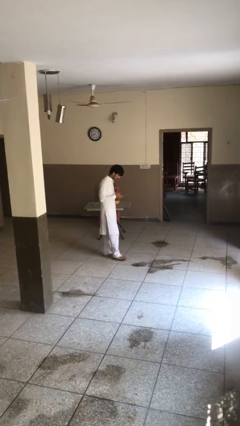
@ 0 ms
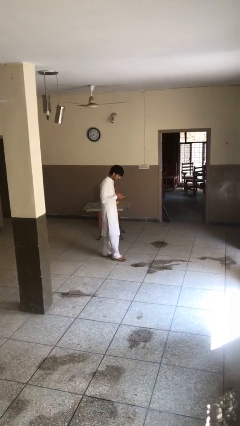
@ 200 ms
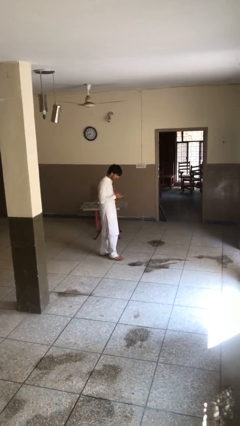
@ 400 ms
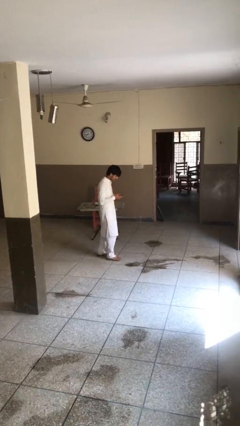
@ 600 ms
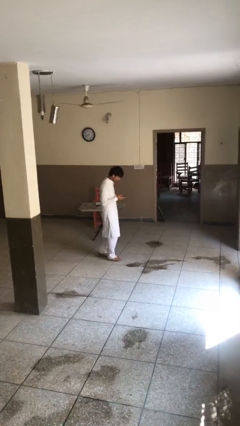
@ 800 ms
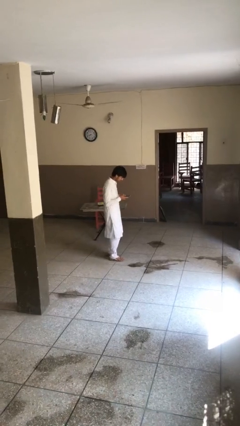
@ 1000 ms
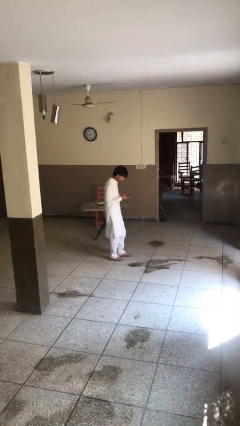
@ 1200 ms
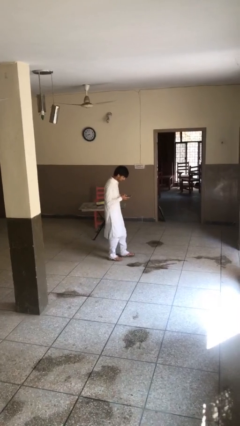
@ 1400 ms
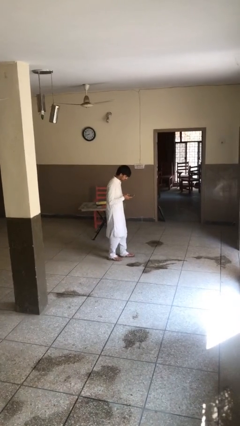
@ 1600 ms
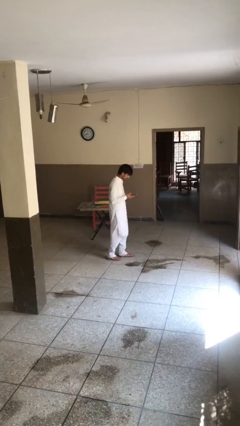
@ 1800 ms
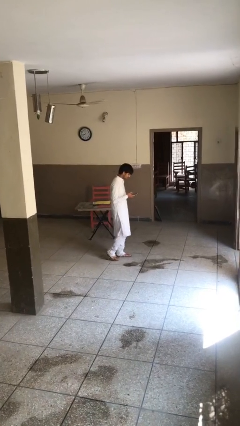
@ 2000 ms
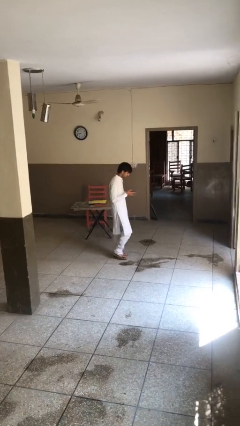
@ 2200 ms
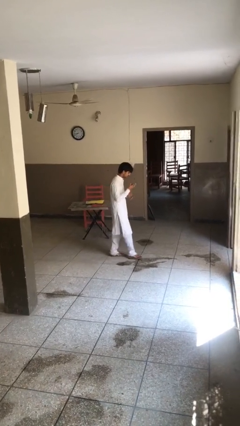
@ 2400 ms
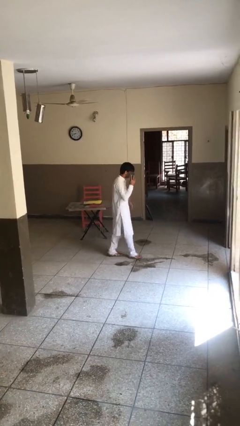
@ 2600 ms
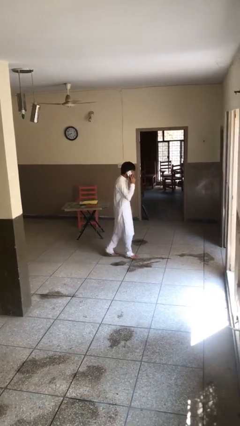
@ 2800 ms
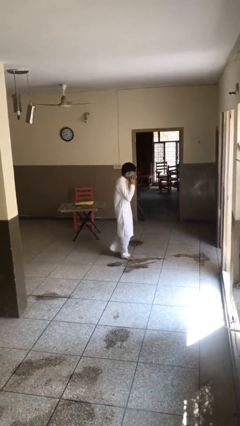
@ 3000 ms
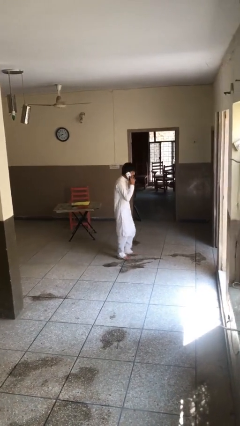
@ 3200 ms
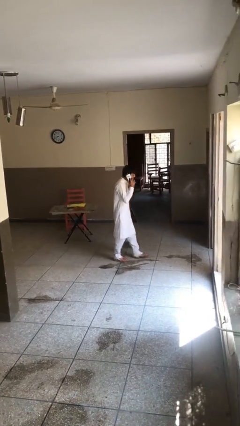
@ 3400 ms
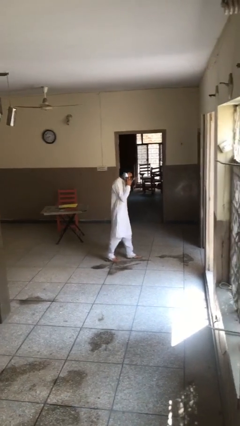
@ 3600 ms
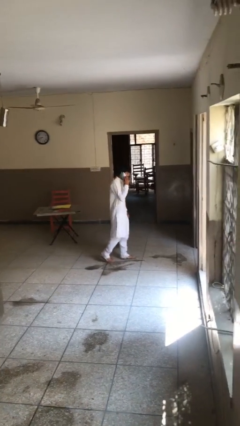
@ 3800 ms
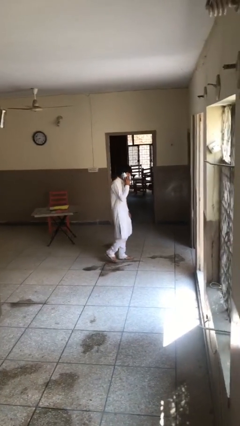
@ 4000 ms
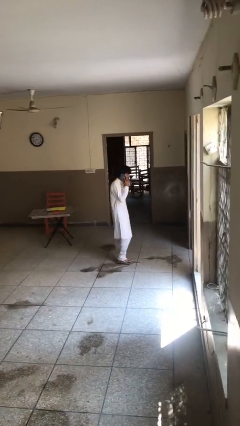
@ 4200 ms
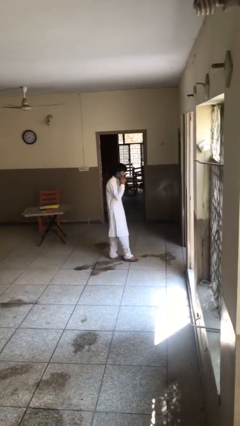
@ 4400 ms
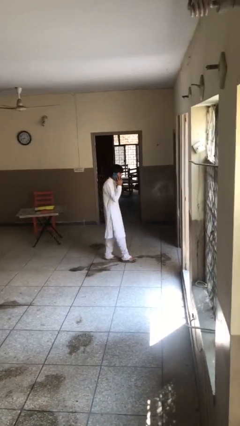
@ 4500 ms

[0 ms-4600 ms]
person talks on phone

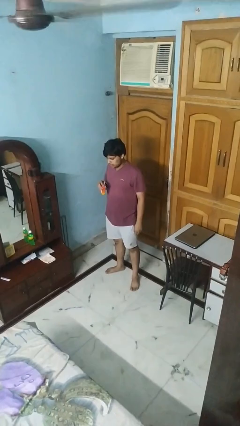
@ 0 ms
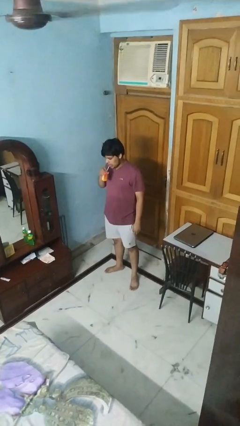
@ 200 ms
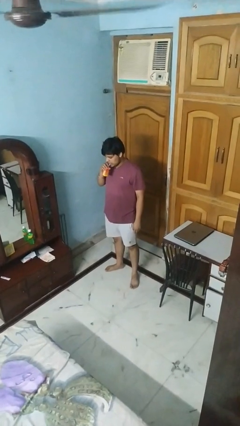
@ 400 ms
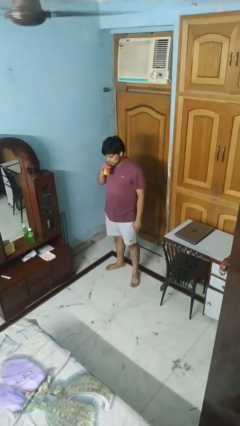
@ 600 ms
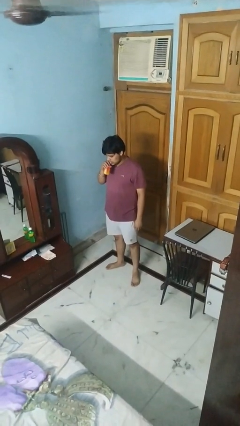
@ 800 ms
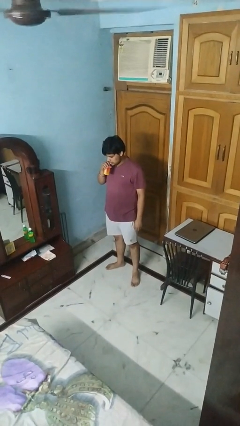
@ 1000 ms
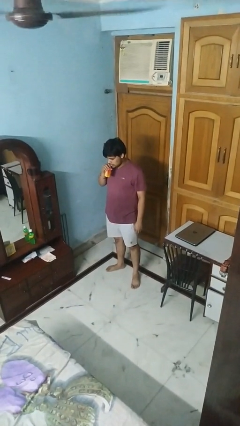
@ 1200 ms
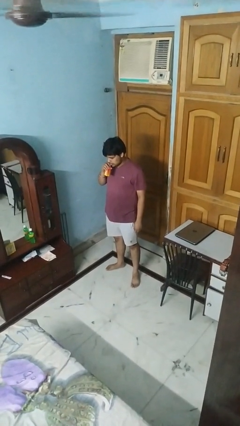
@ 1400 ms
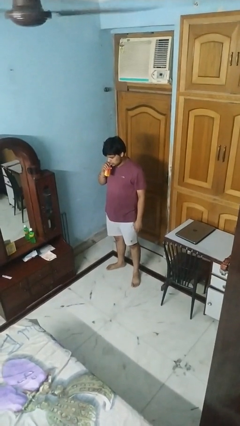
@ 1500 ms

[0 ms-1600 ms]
person drinks from straw

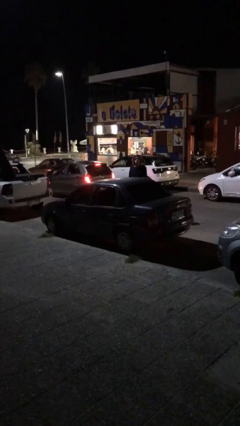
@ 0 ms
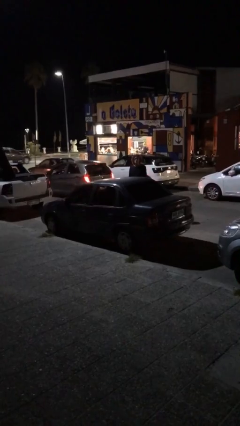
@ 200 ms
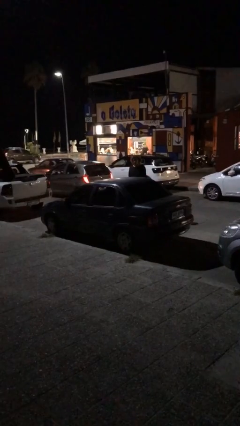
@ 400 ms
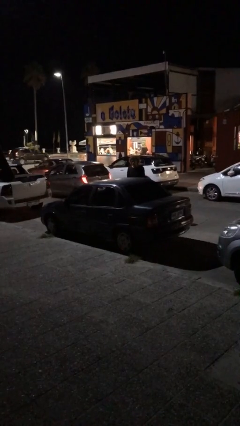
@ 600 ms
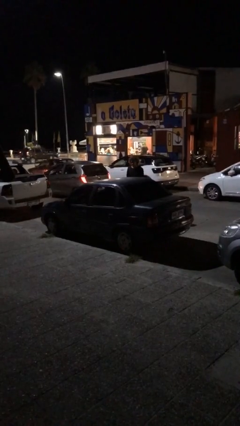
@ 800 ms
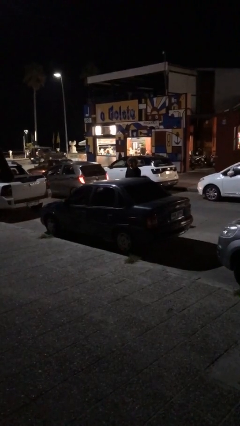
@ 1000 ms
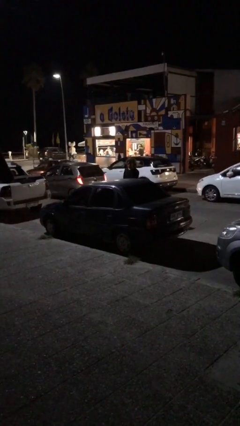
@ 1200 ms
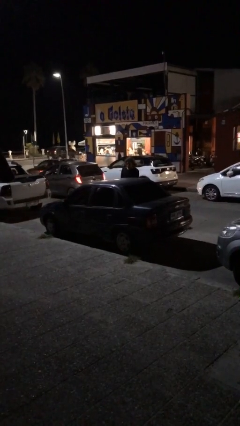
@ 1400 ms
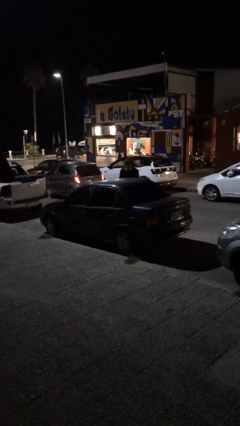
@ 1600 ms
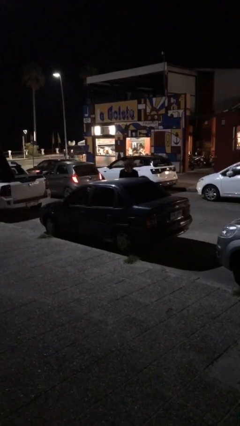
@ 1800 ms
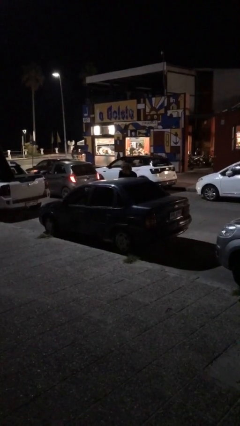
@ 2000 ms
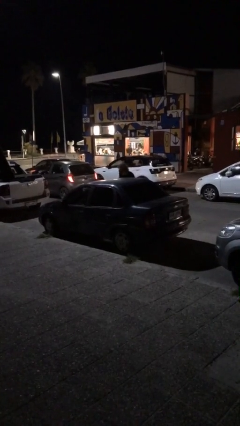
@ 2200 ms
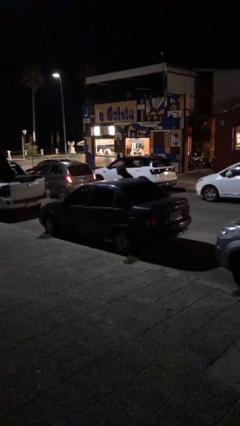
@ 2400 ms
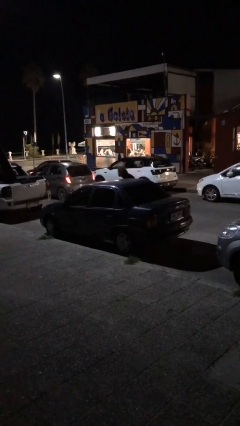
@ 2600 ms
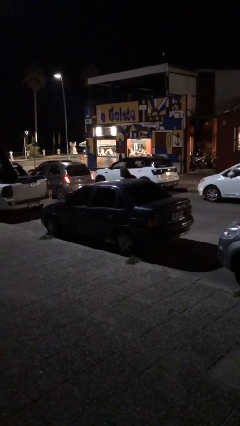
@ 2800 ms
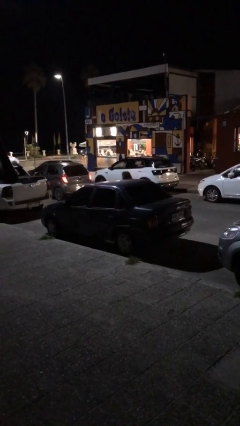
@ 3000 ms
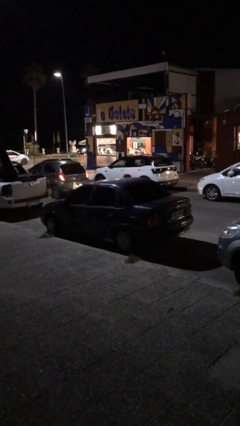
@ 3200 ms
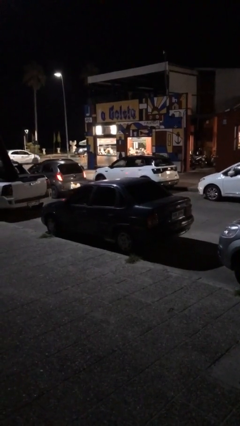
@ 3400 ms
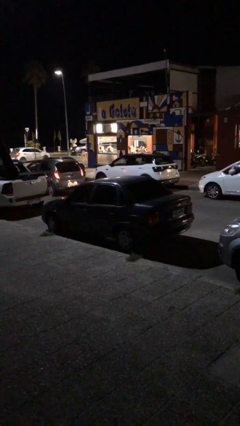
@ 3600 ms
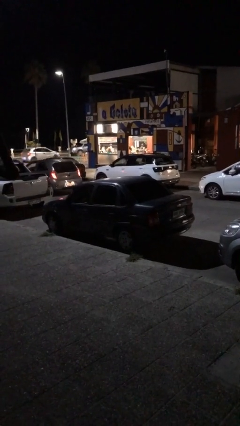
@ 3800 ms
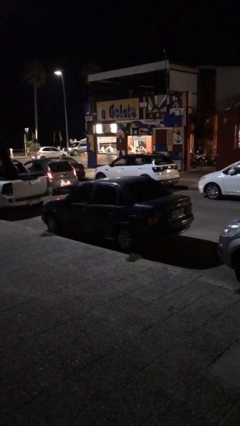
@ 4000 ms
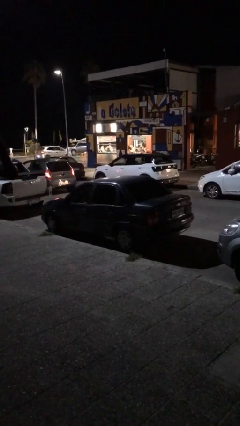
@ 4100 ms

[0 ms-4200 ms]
car picks up person

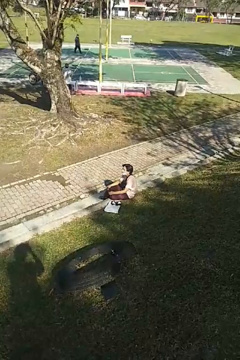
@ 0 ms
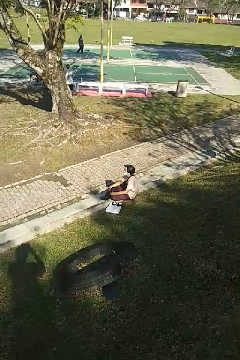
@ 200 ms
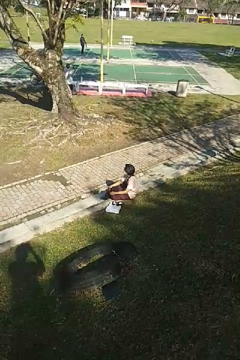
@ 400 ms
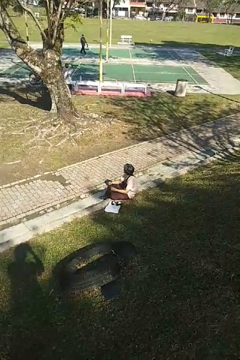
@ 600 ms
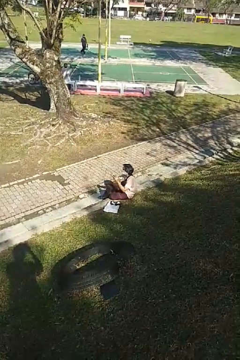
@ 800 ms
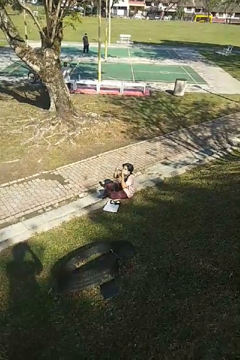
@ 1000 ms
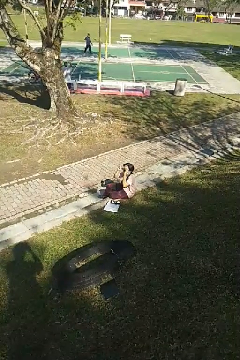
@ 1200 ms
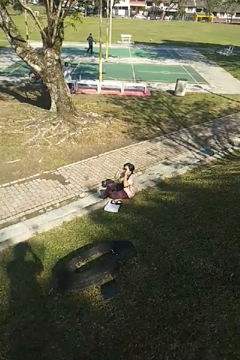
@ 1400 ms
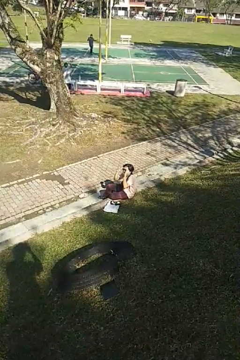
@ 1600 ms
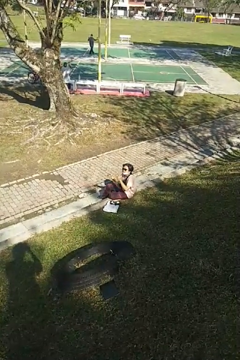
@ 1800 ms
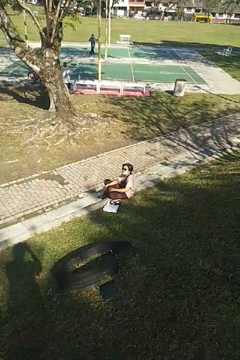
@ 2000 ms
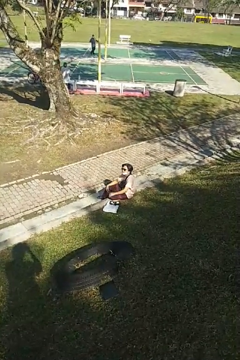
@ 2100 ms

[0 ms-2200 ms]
person puts on sunglasses

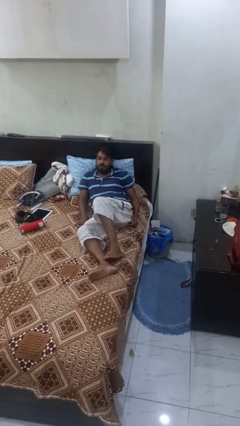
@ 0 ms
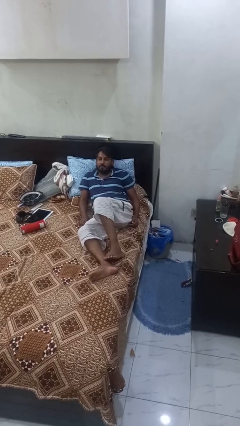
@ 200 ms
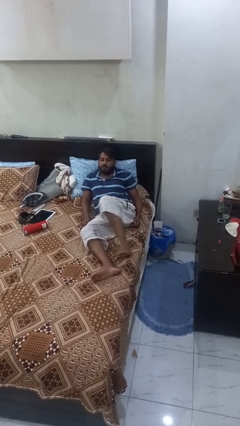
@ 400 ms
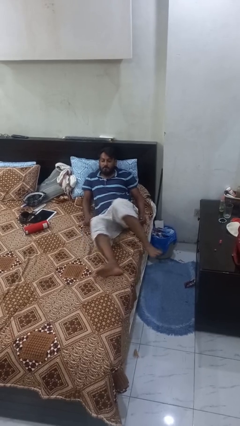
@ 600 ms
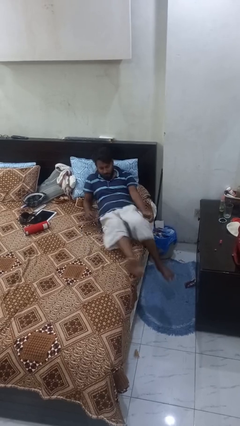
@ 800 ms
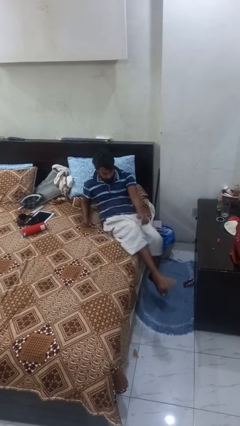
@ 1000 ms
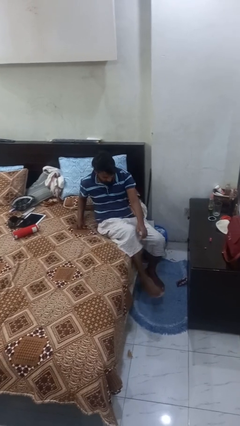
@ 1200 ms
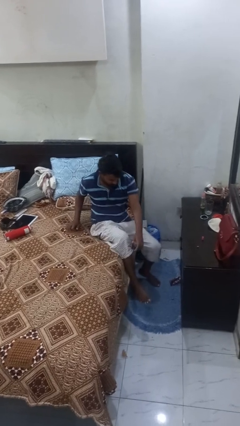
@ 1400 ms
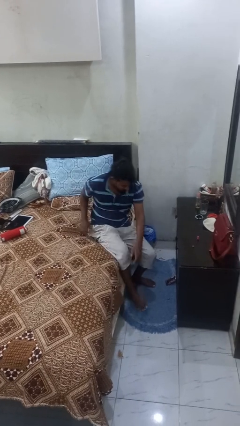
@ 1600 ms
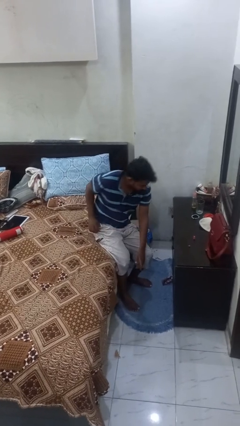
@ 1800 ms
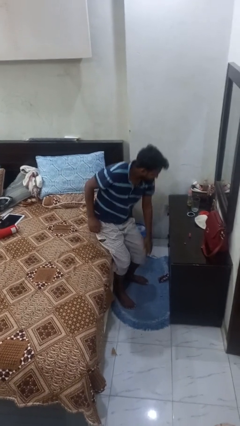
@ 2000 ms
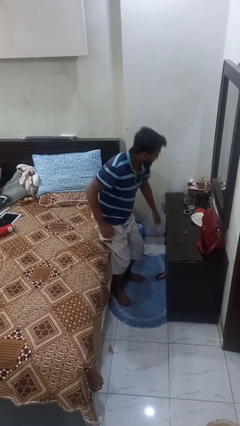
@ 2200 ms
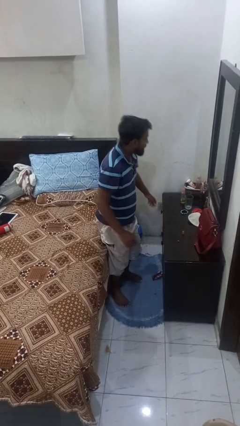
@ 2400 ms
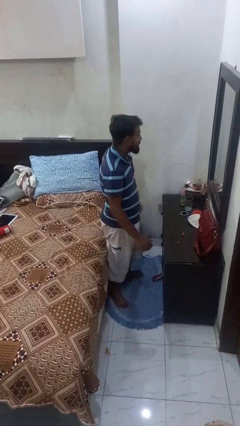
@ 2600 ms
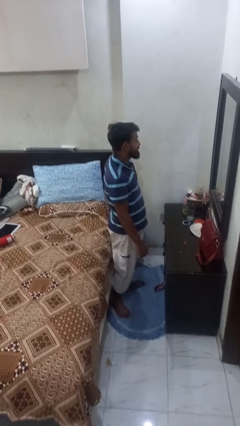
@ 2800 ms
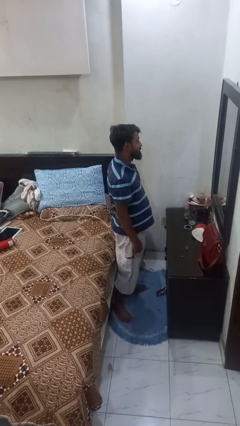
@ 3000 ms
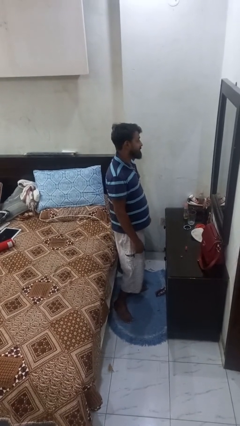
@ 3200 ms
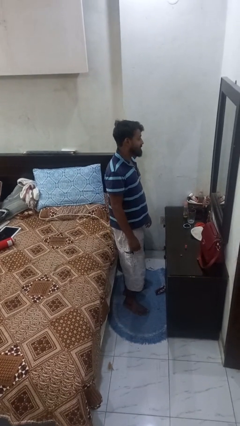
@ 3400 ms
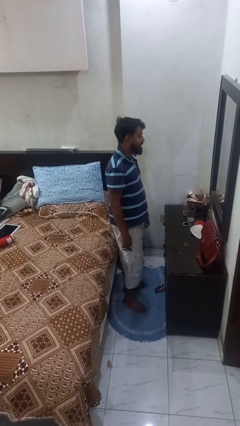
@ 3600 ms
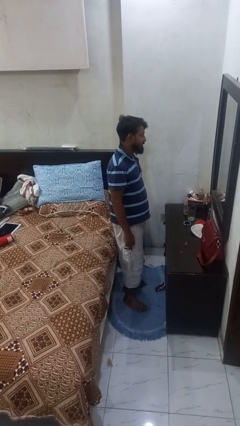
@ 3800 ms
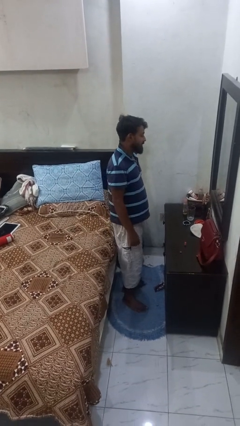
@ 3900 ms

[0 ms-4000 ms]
person stands up

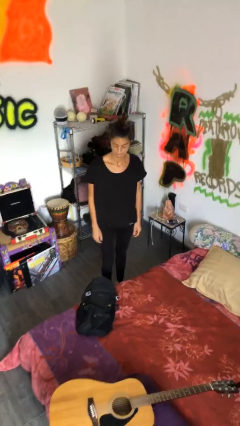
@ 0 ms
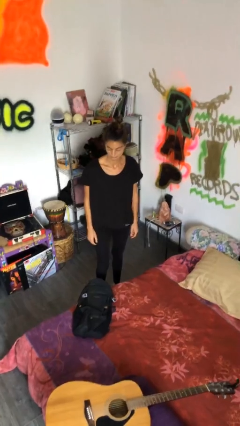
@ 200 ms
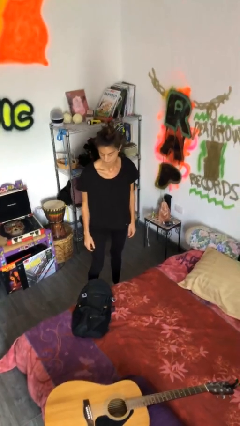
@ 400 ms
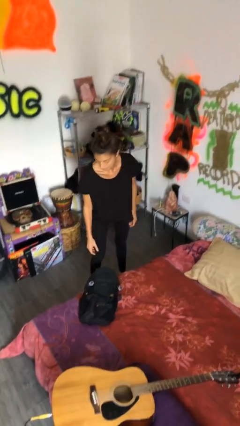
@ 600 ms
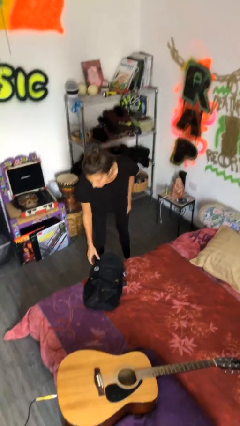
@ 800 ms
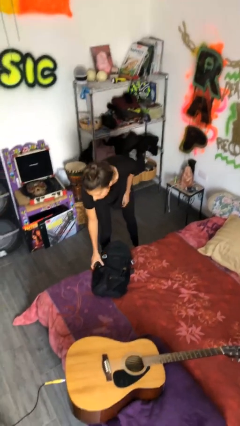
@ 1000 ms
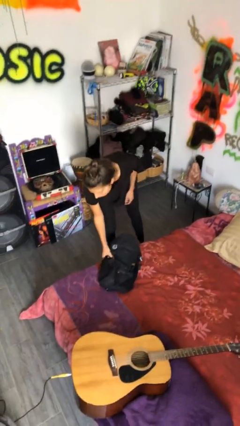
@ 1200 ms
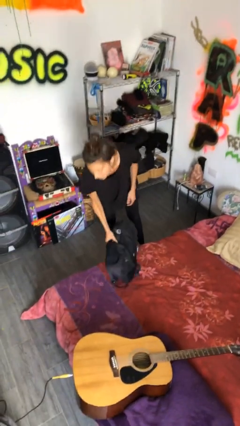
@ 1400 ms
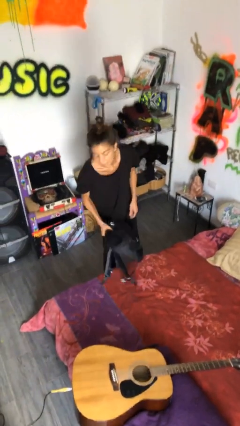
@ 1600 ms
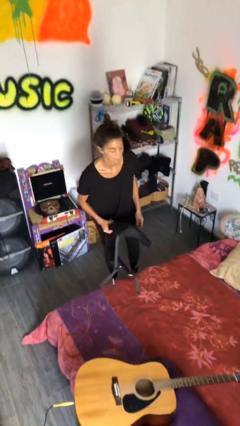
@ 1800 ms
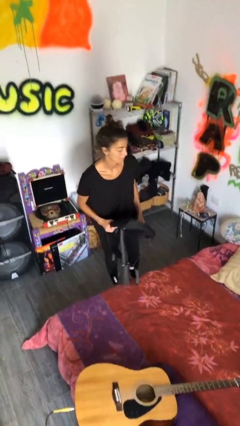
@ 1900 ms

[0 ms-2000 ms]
person picks up object from bed
